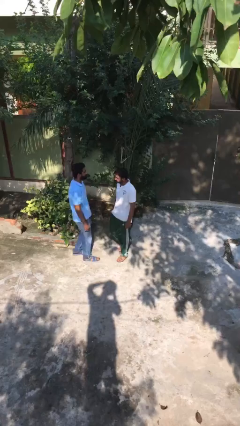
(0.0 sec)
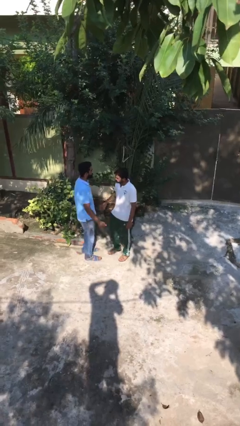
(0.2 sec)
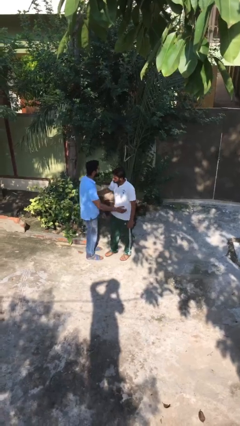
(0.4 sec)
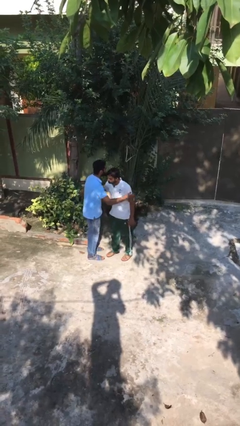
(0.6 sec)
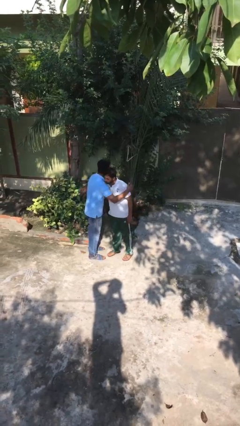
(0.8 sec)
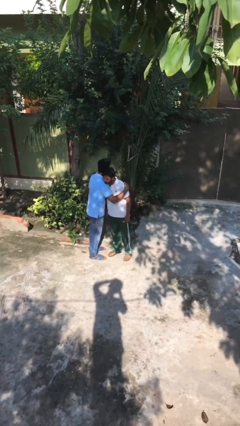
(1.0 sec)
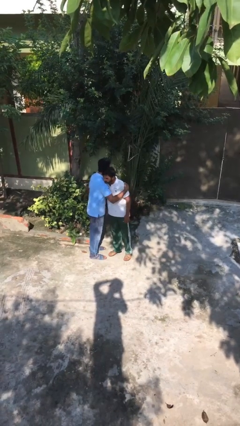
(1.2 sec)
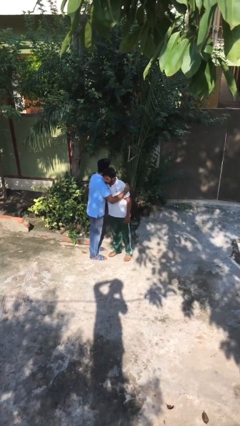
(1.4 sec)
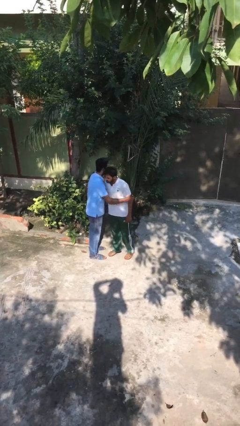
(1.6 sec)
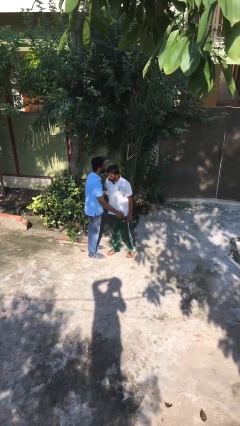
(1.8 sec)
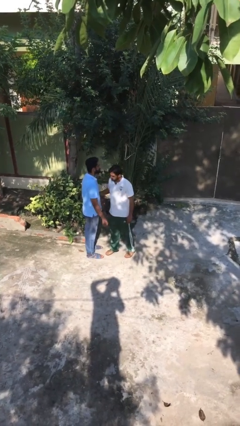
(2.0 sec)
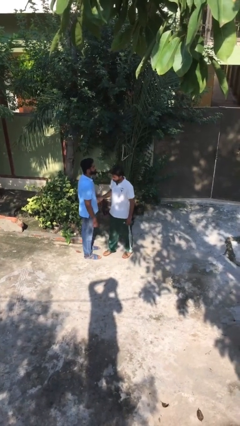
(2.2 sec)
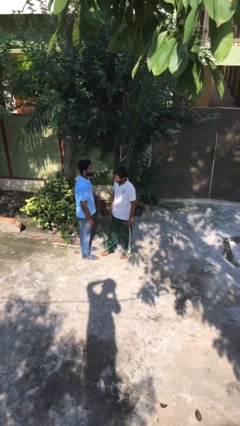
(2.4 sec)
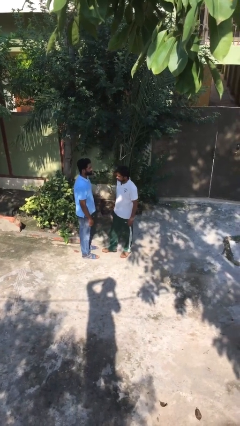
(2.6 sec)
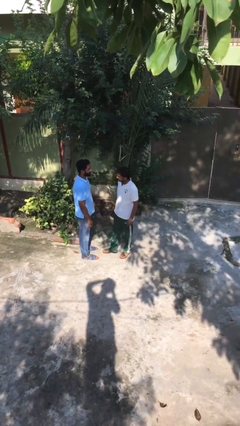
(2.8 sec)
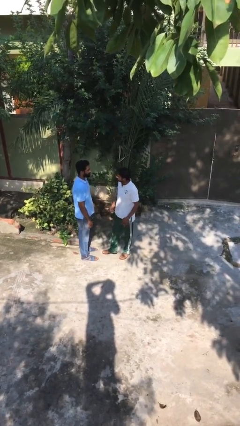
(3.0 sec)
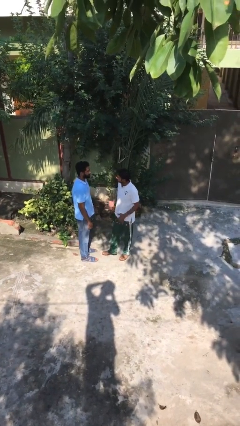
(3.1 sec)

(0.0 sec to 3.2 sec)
person embraces person

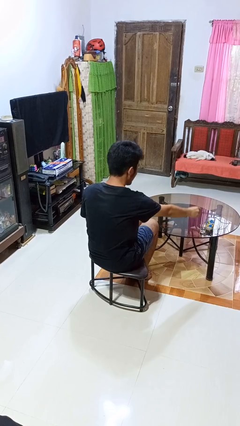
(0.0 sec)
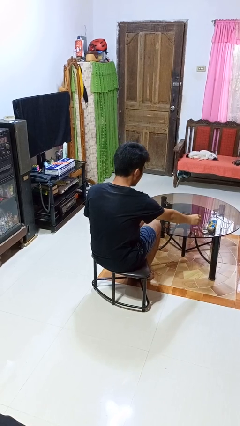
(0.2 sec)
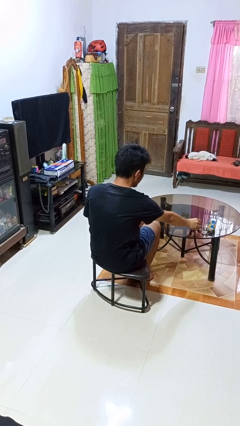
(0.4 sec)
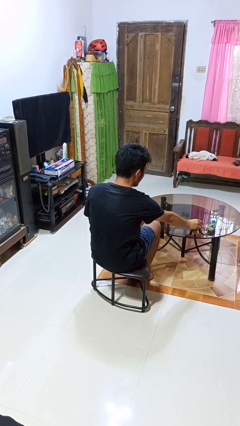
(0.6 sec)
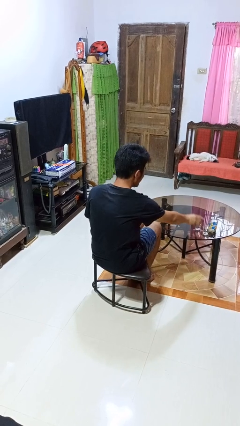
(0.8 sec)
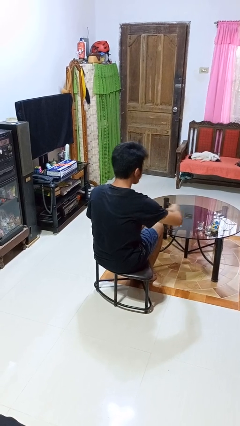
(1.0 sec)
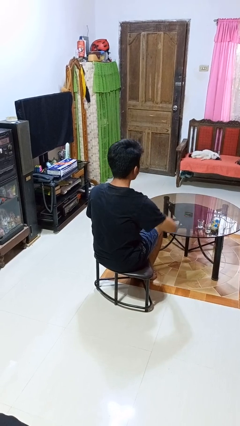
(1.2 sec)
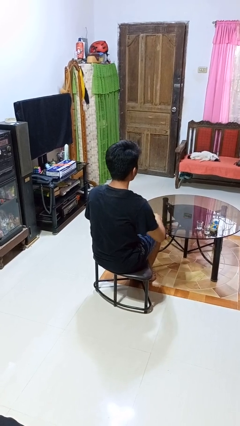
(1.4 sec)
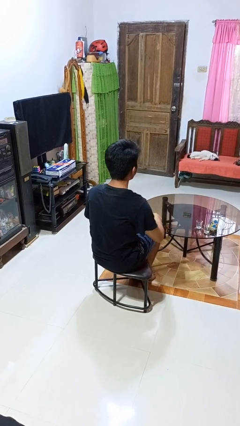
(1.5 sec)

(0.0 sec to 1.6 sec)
person puts down object on table

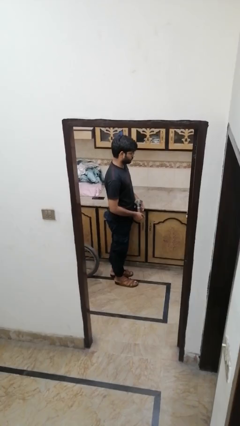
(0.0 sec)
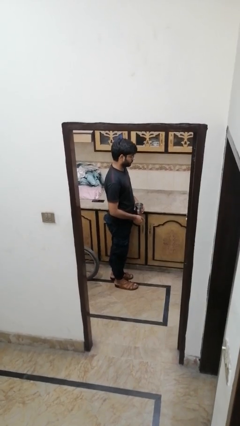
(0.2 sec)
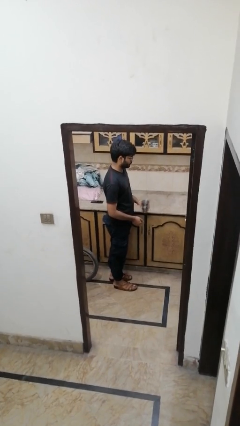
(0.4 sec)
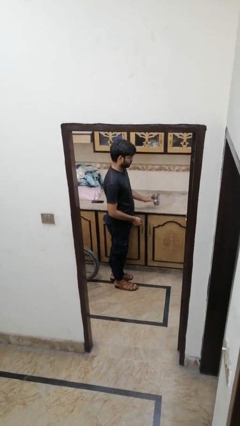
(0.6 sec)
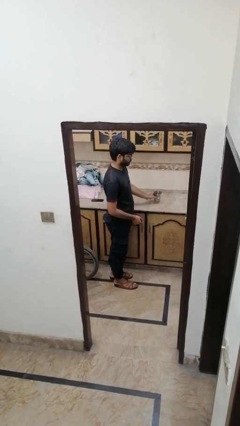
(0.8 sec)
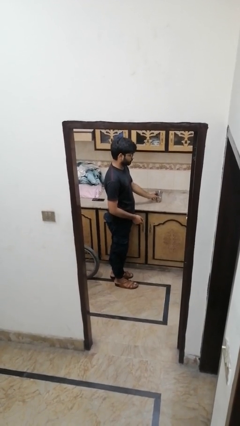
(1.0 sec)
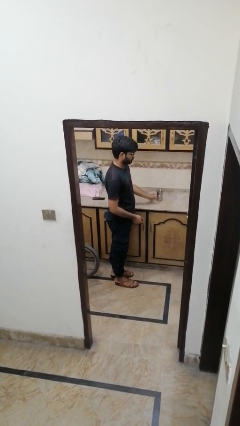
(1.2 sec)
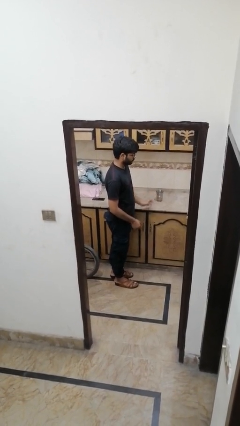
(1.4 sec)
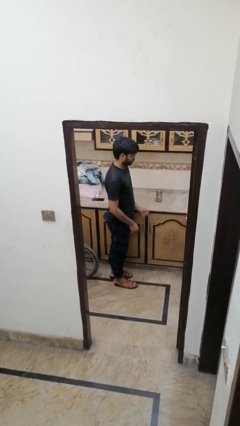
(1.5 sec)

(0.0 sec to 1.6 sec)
person puts down object on countertop

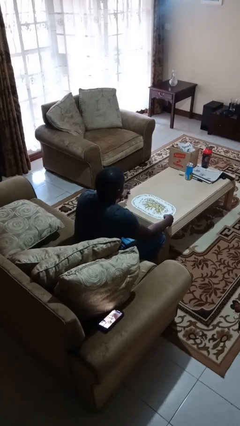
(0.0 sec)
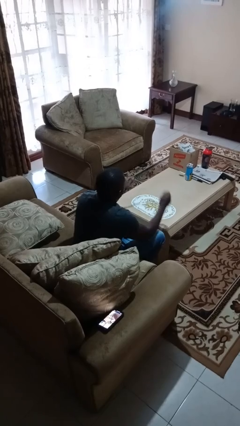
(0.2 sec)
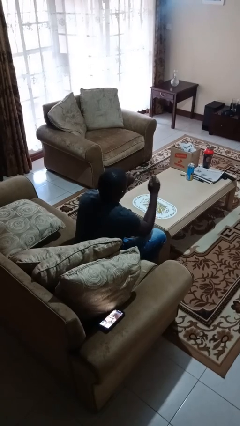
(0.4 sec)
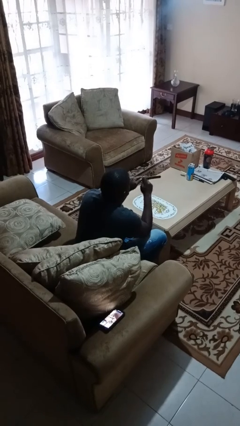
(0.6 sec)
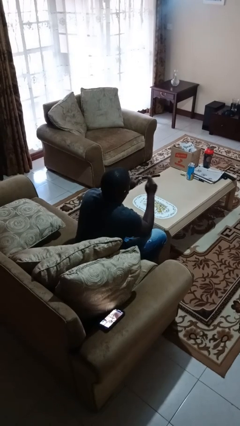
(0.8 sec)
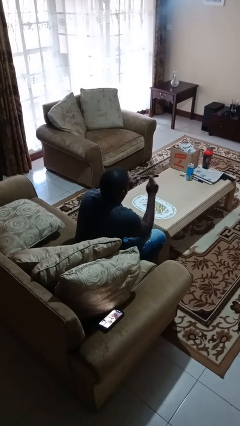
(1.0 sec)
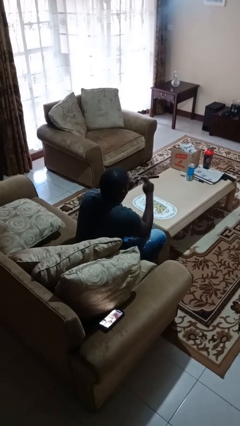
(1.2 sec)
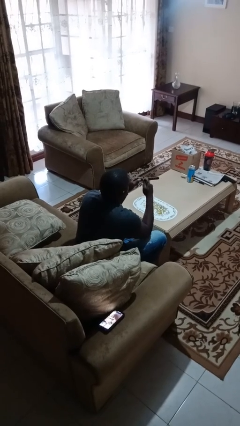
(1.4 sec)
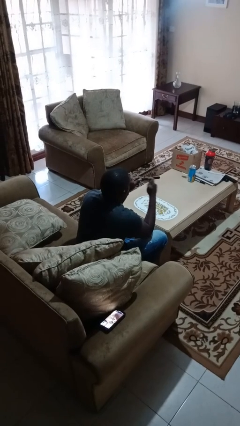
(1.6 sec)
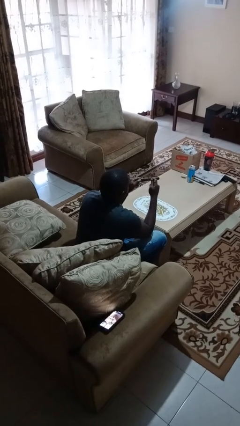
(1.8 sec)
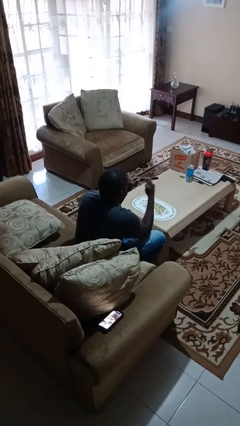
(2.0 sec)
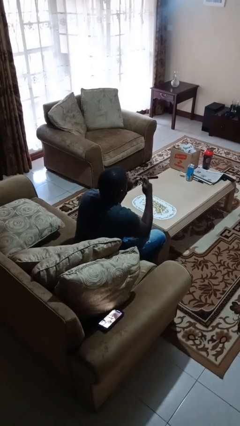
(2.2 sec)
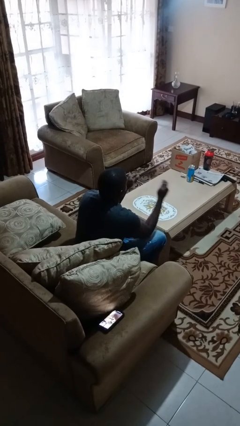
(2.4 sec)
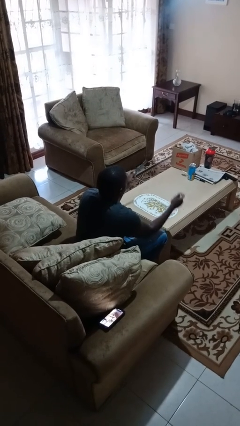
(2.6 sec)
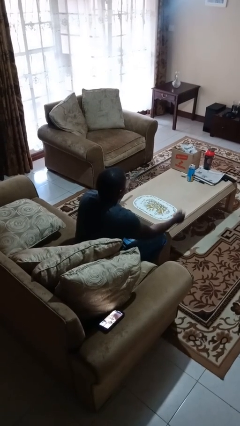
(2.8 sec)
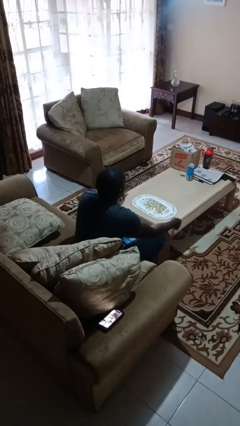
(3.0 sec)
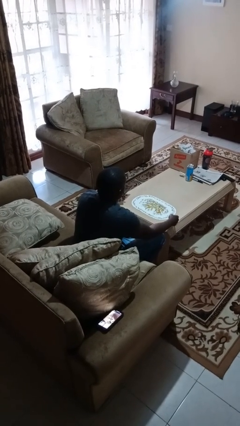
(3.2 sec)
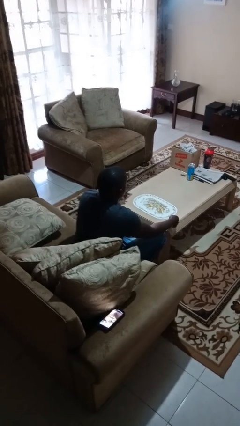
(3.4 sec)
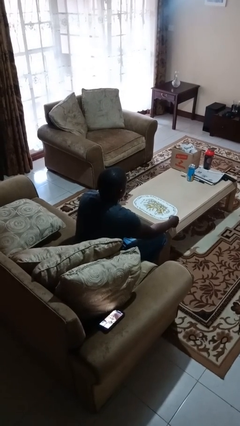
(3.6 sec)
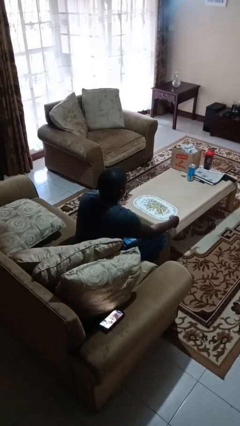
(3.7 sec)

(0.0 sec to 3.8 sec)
person files fingernails

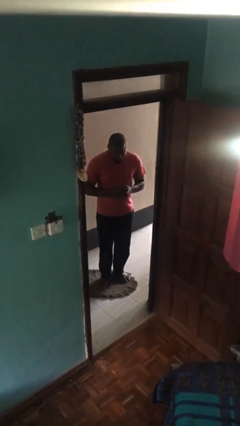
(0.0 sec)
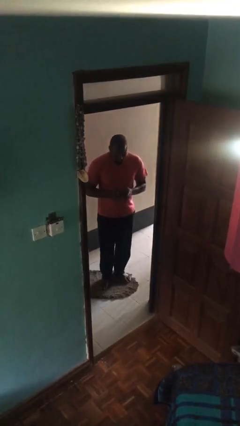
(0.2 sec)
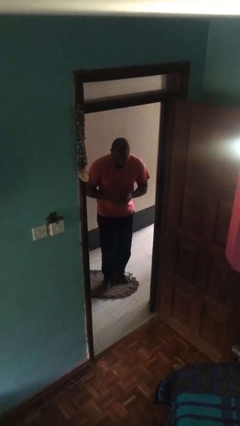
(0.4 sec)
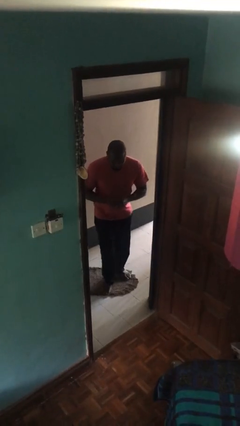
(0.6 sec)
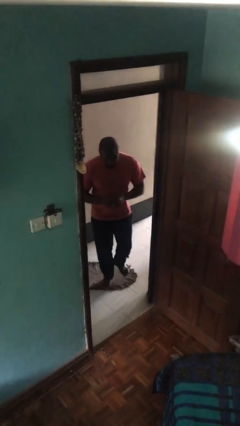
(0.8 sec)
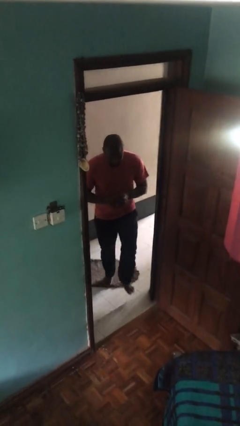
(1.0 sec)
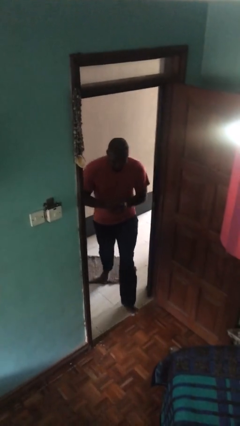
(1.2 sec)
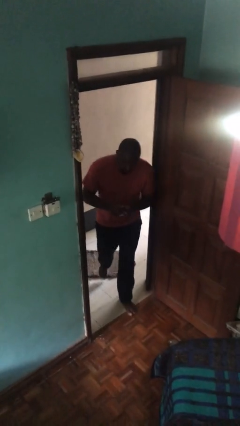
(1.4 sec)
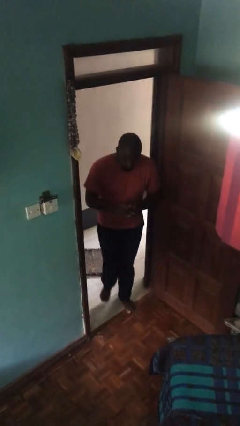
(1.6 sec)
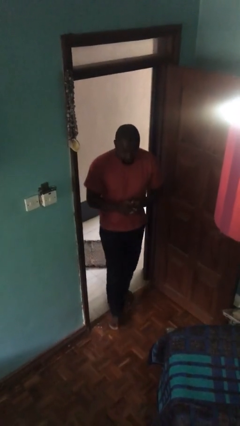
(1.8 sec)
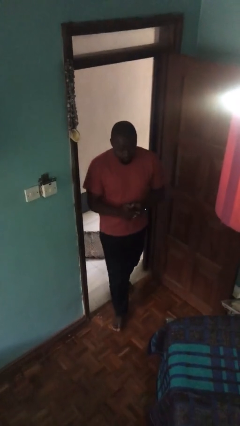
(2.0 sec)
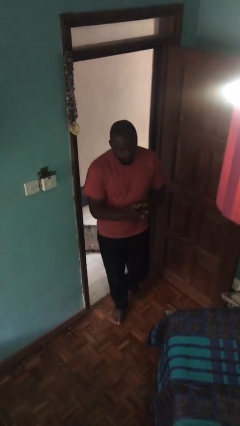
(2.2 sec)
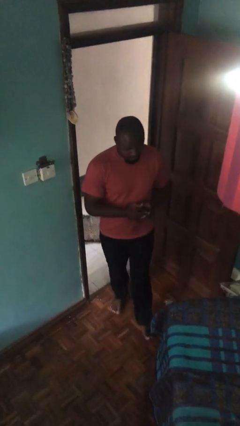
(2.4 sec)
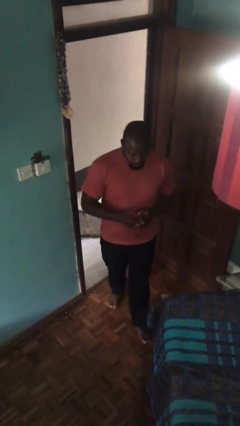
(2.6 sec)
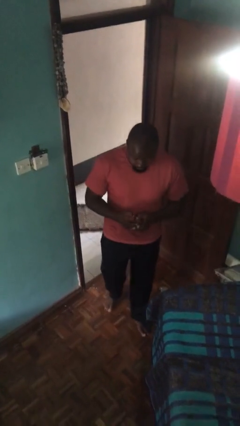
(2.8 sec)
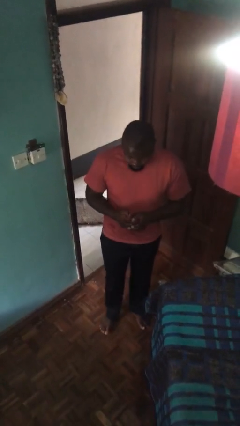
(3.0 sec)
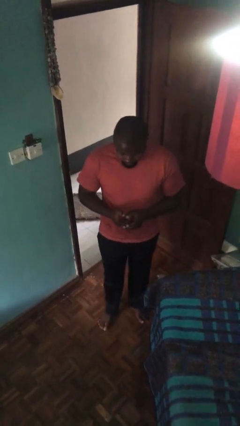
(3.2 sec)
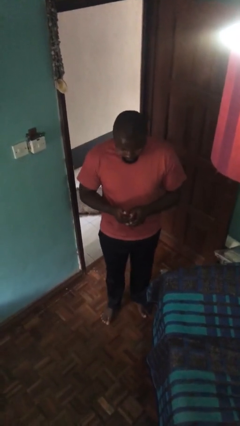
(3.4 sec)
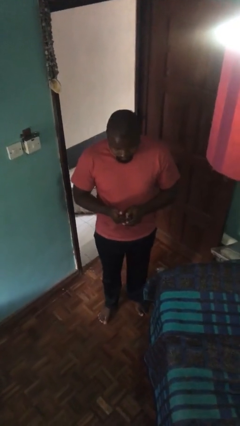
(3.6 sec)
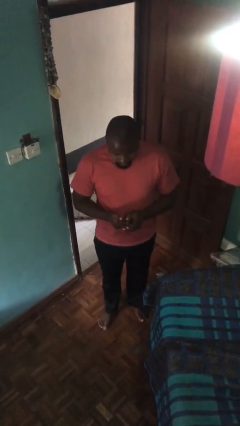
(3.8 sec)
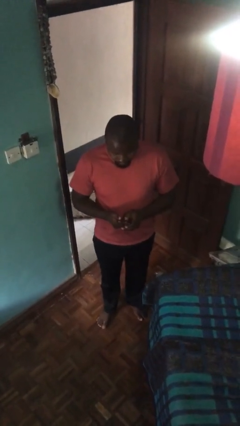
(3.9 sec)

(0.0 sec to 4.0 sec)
person enters scene through structure

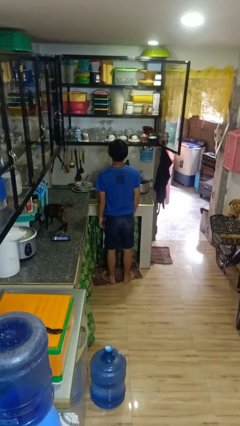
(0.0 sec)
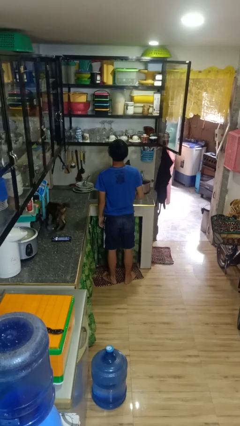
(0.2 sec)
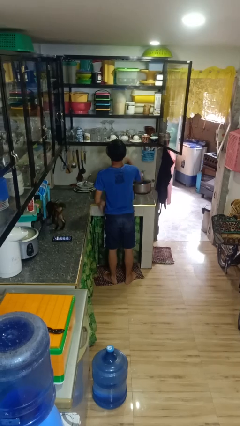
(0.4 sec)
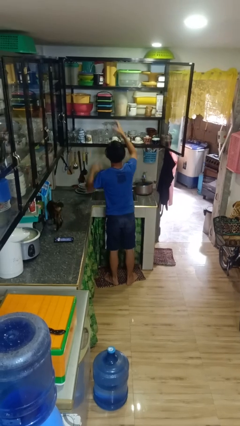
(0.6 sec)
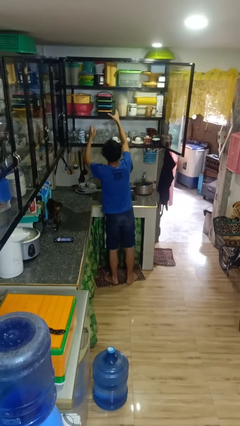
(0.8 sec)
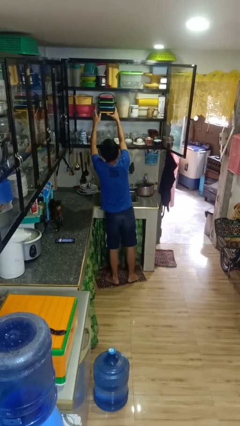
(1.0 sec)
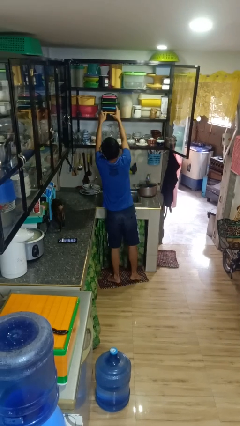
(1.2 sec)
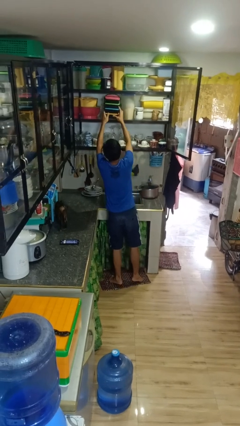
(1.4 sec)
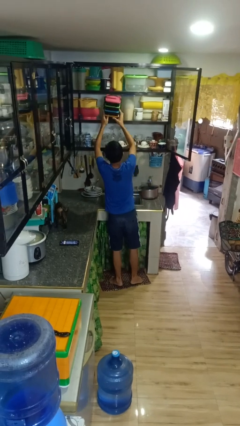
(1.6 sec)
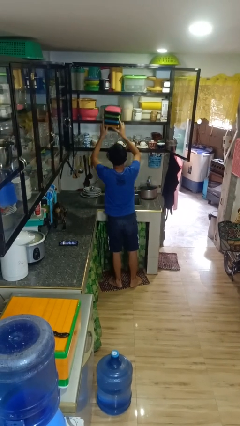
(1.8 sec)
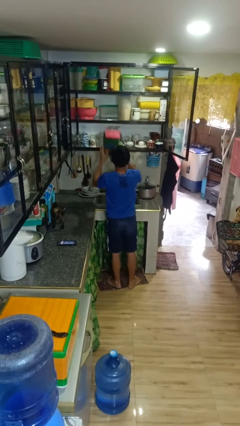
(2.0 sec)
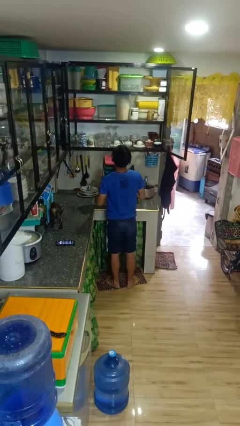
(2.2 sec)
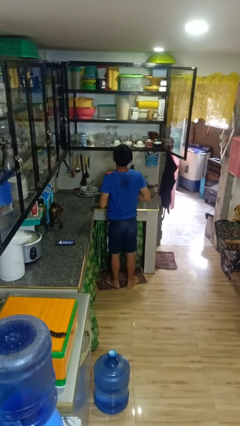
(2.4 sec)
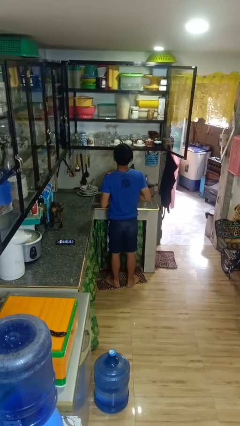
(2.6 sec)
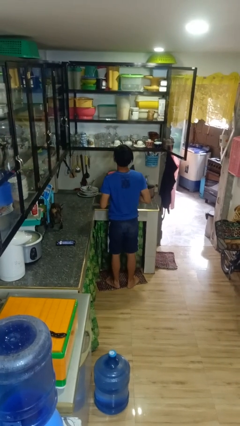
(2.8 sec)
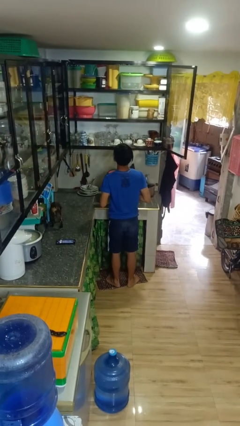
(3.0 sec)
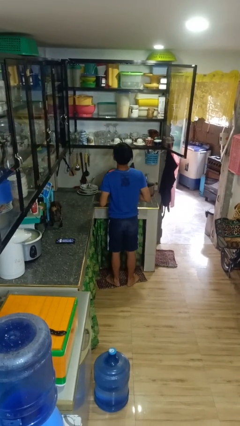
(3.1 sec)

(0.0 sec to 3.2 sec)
person picks up object from cabinet
